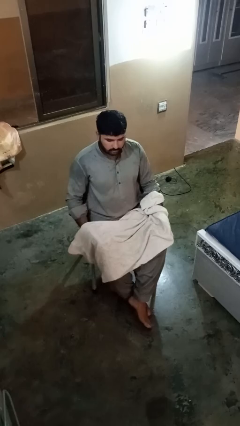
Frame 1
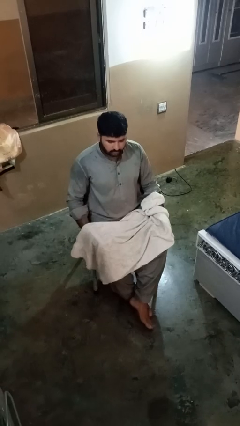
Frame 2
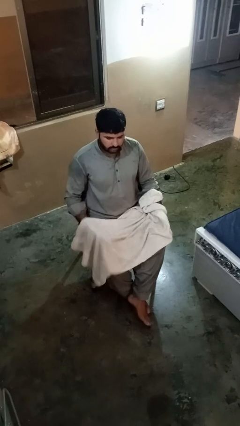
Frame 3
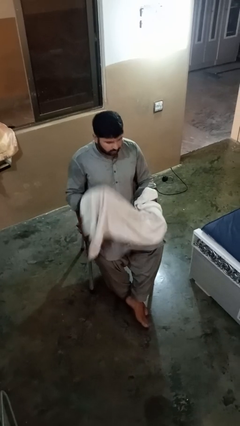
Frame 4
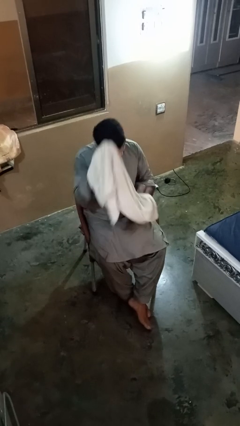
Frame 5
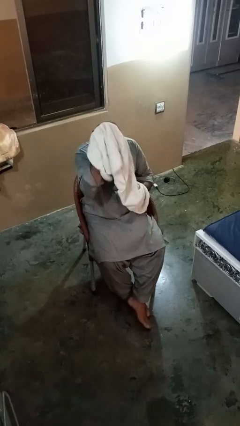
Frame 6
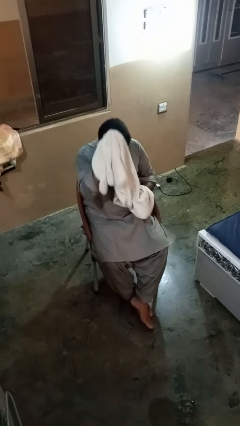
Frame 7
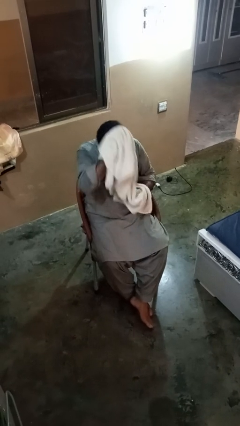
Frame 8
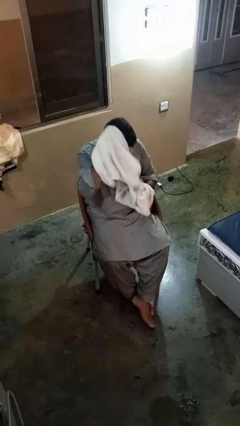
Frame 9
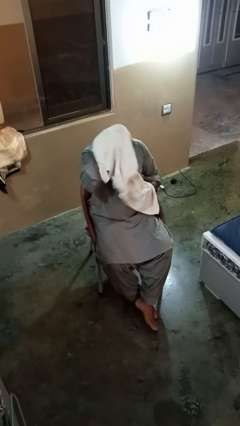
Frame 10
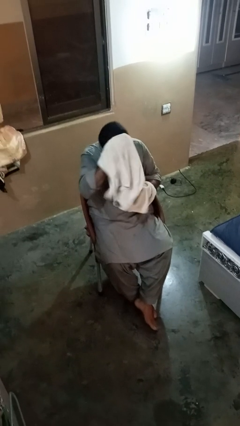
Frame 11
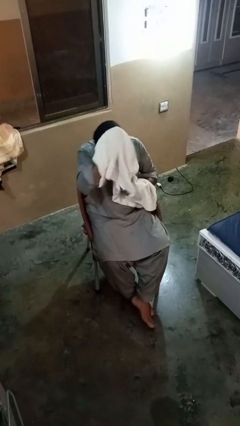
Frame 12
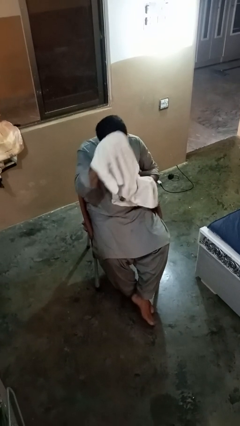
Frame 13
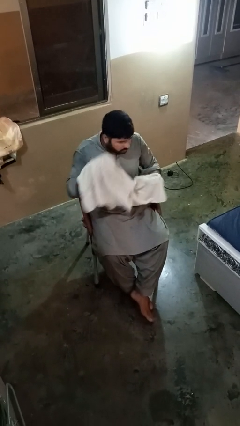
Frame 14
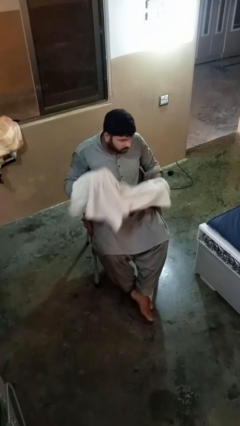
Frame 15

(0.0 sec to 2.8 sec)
person dries hair with towel

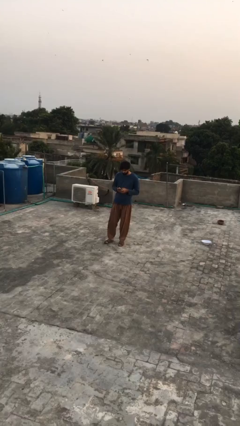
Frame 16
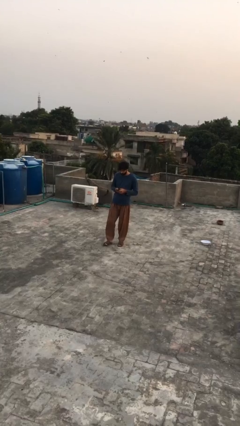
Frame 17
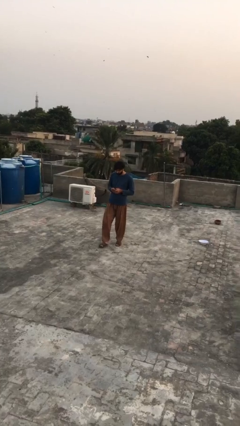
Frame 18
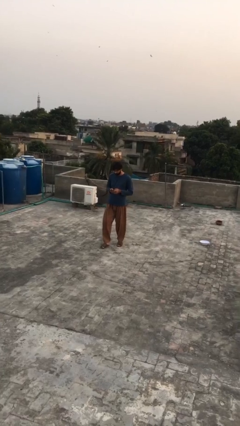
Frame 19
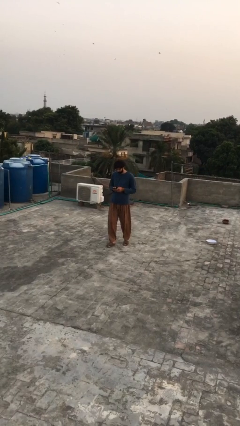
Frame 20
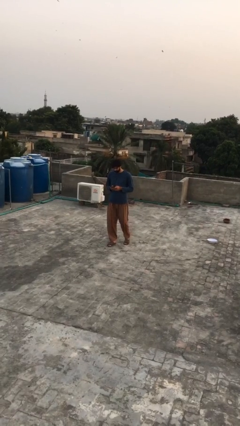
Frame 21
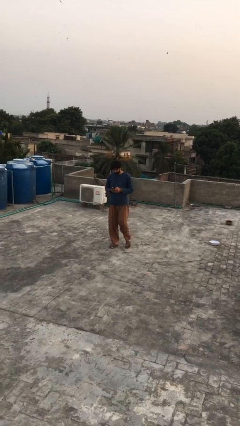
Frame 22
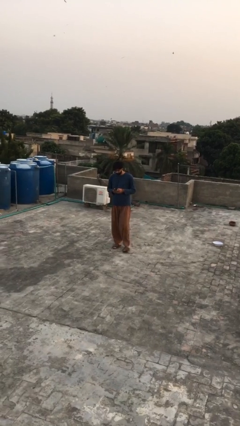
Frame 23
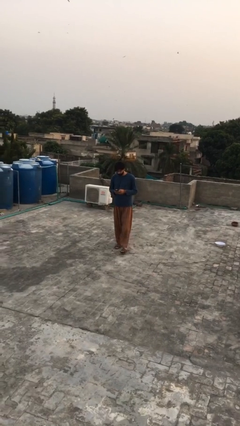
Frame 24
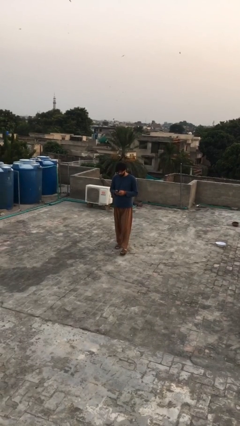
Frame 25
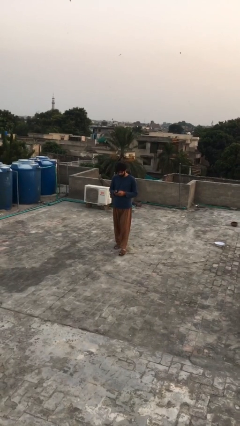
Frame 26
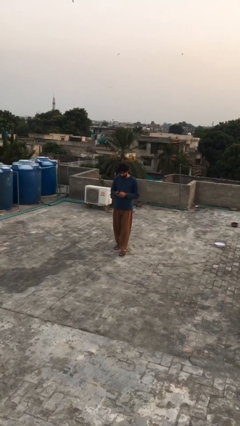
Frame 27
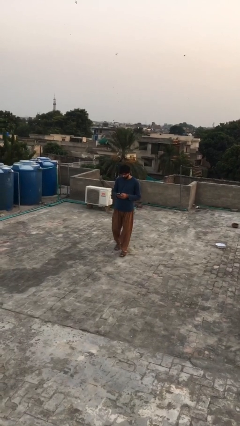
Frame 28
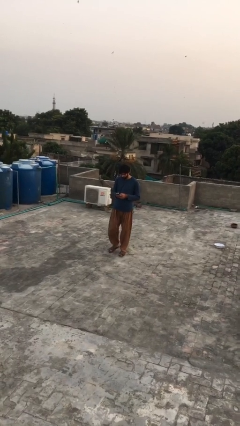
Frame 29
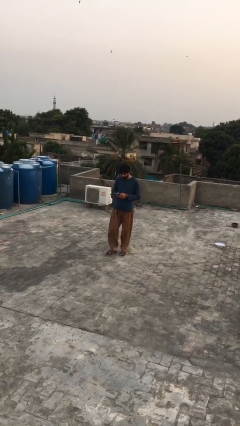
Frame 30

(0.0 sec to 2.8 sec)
person texts on phone

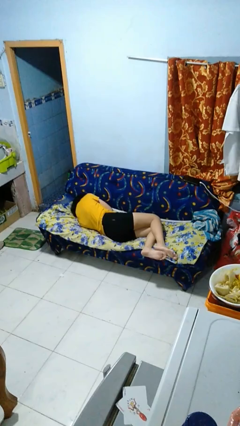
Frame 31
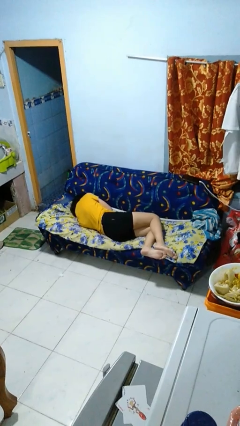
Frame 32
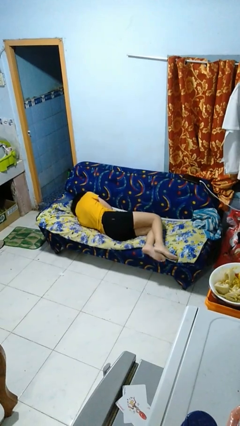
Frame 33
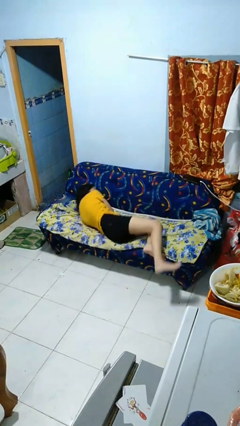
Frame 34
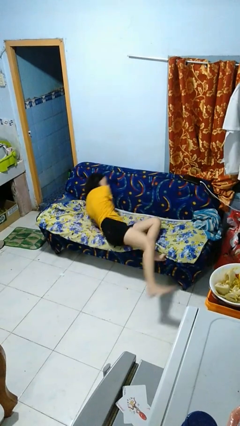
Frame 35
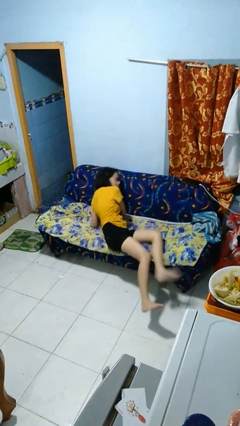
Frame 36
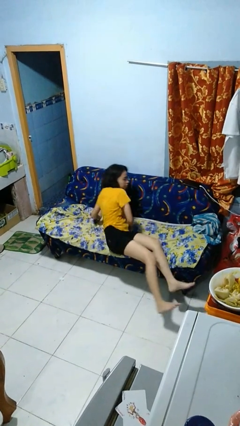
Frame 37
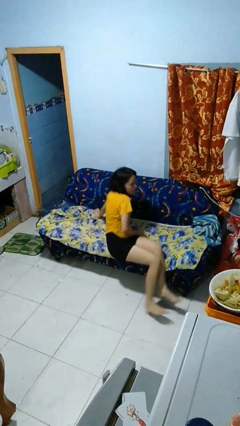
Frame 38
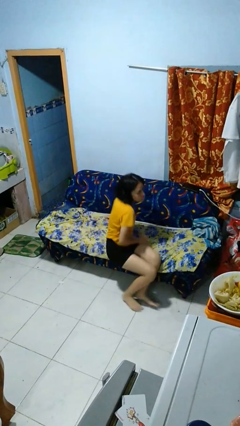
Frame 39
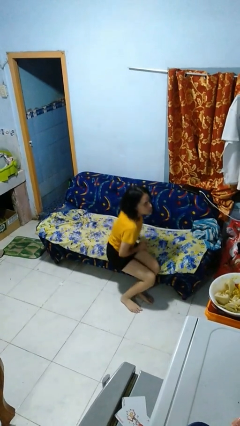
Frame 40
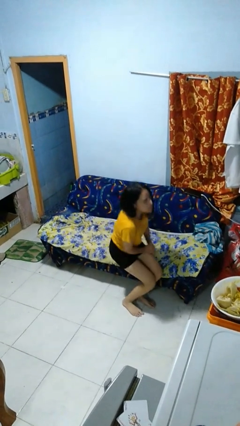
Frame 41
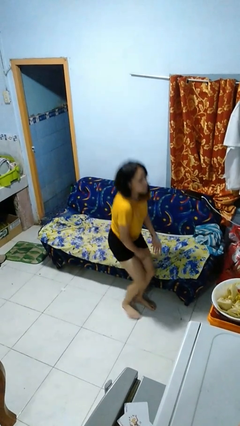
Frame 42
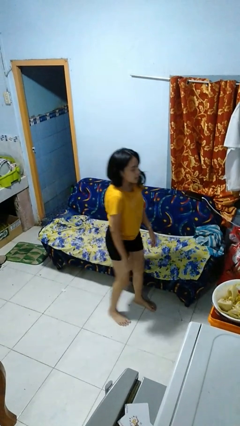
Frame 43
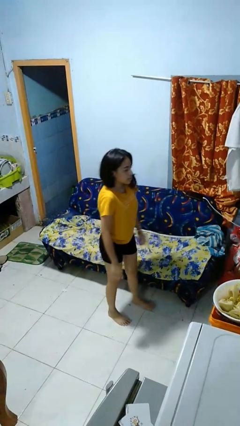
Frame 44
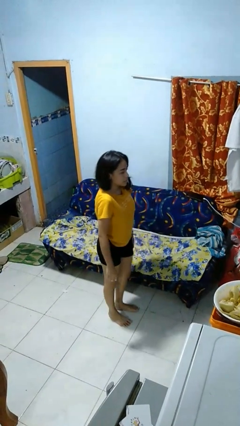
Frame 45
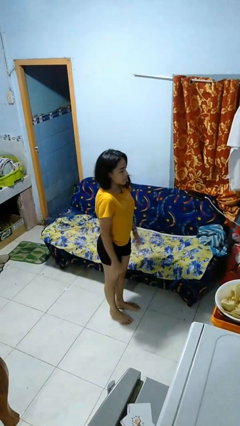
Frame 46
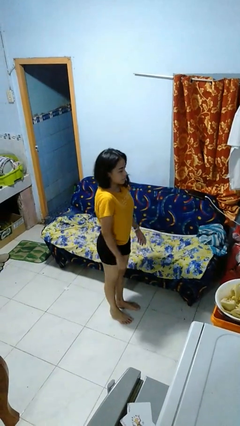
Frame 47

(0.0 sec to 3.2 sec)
person stands up

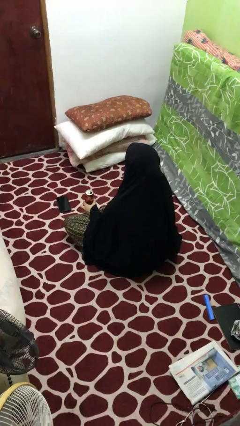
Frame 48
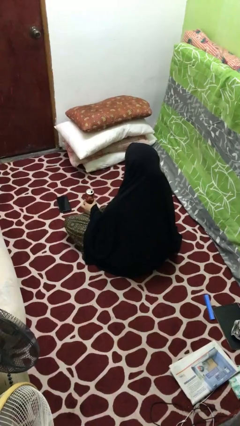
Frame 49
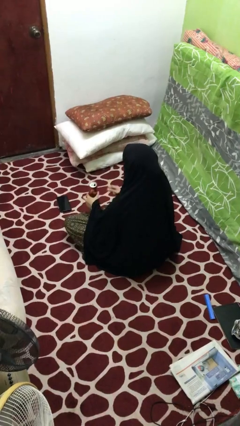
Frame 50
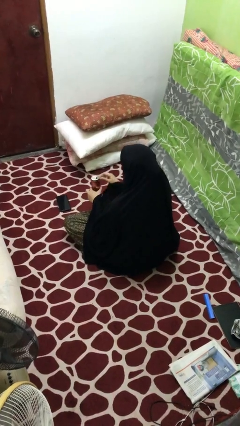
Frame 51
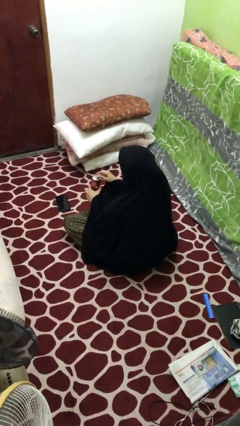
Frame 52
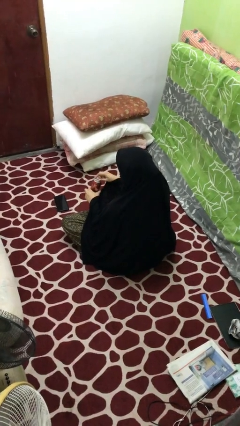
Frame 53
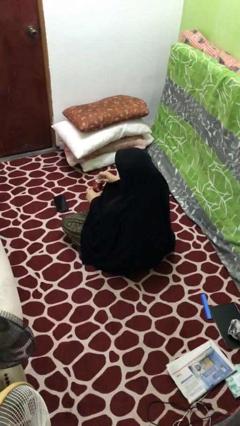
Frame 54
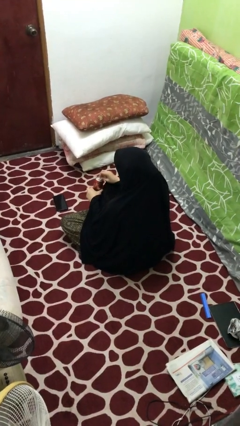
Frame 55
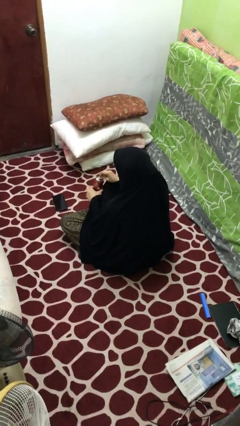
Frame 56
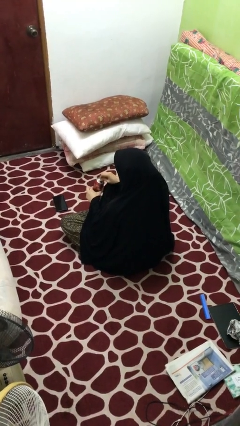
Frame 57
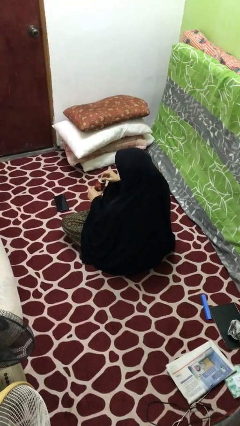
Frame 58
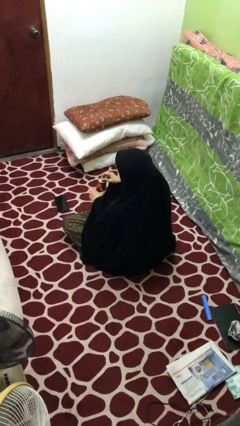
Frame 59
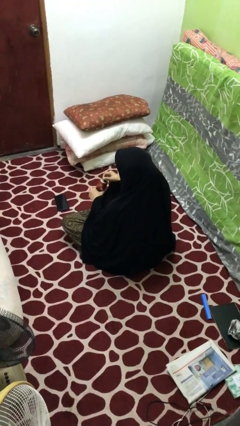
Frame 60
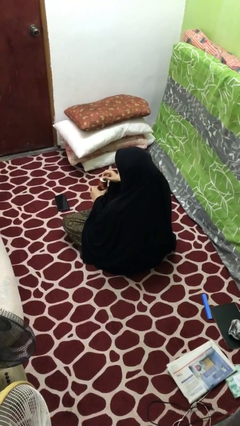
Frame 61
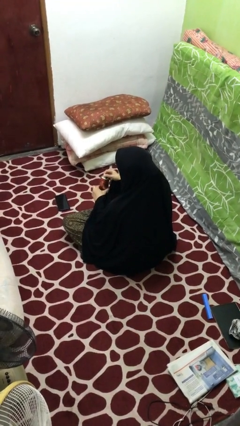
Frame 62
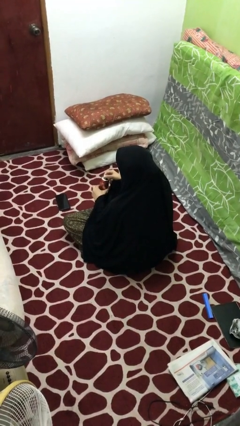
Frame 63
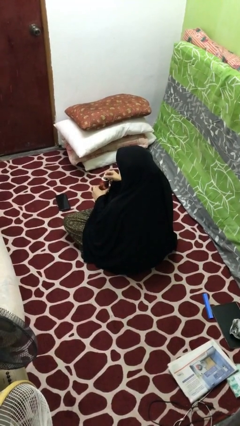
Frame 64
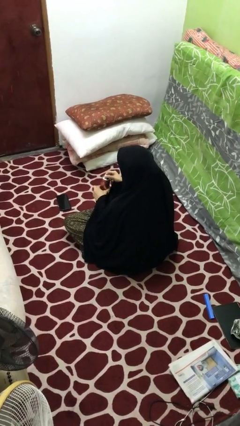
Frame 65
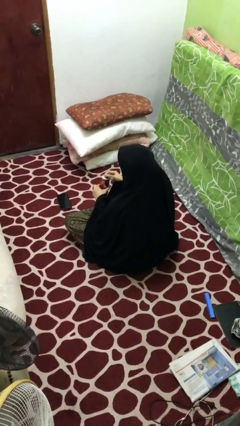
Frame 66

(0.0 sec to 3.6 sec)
person opens beverage can

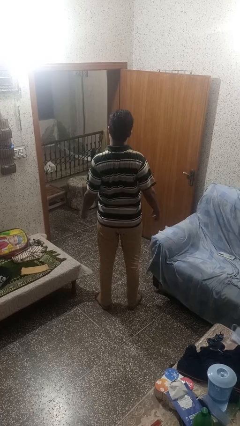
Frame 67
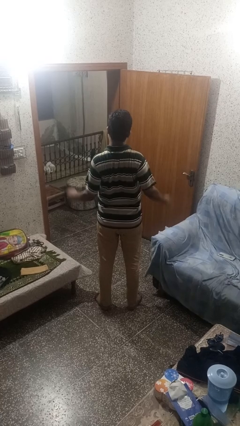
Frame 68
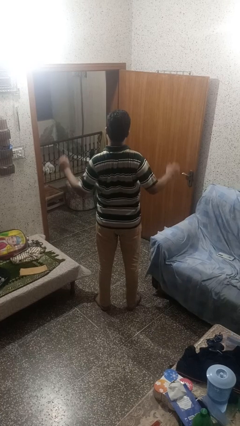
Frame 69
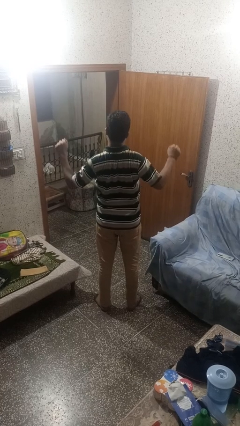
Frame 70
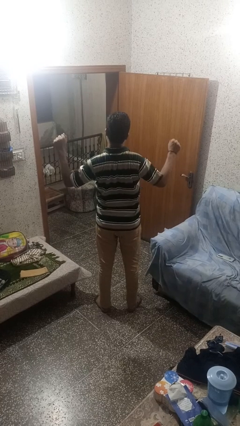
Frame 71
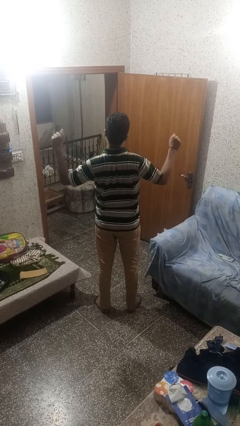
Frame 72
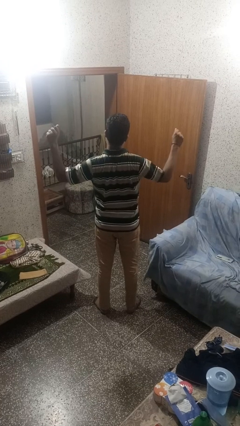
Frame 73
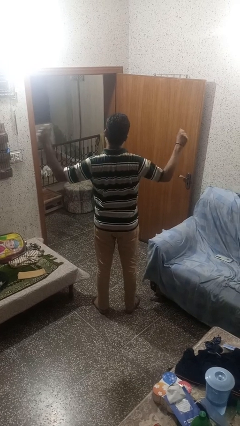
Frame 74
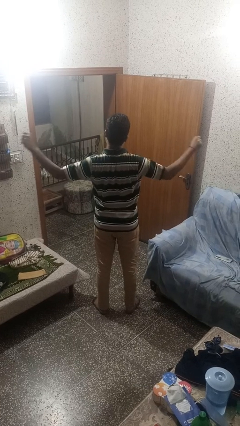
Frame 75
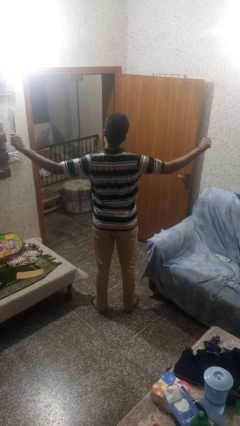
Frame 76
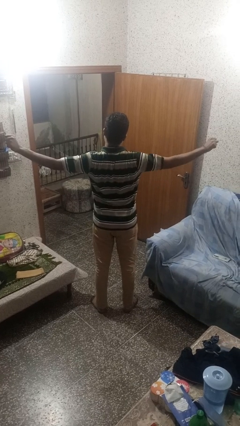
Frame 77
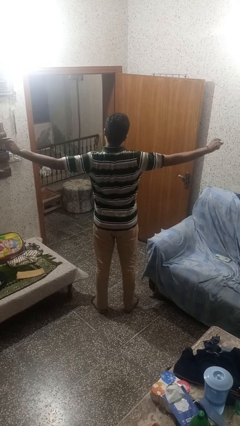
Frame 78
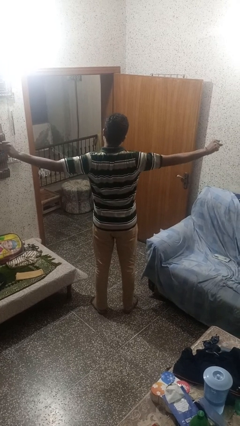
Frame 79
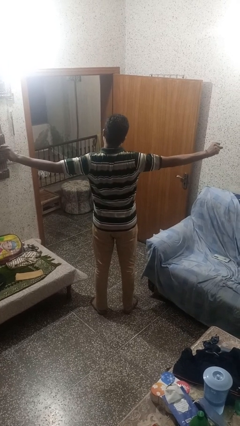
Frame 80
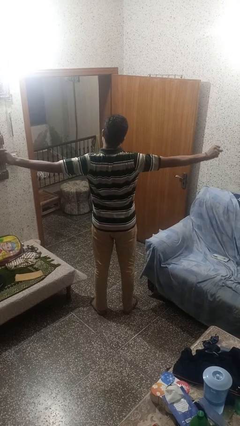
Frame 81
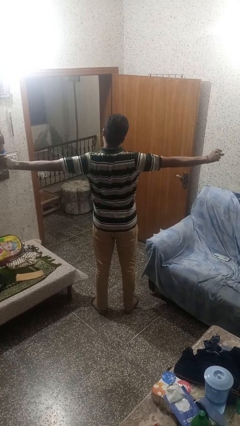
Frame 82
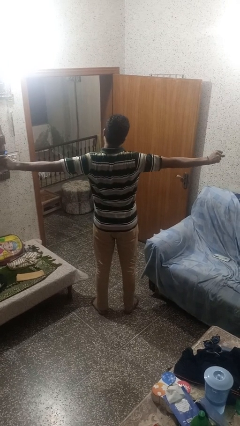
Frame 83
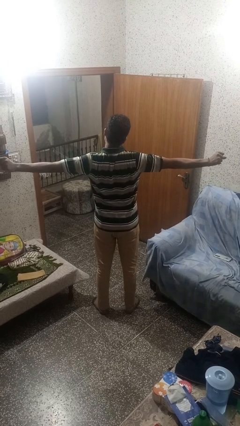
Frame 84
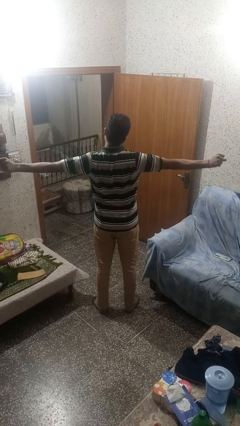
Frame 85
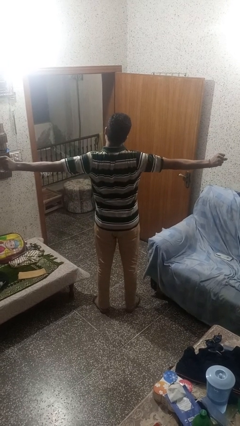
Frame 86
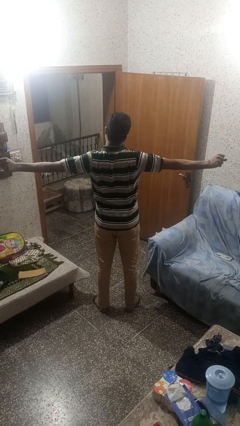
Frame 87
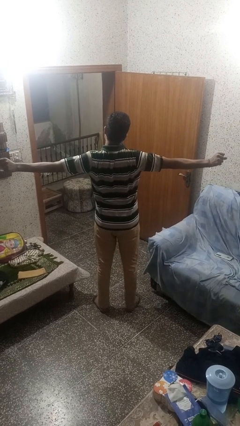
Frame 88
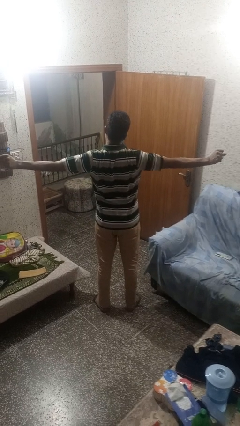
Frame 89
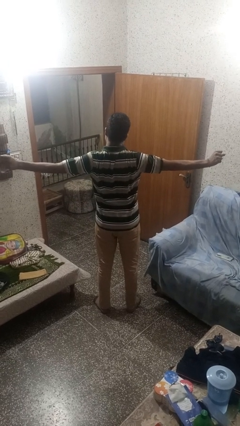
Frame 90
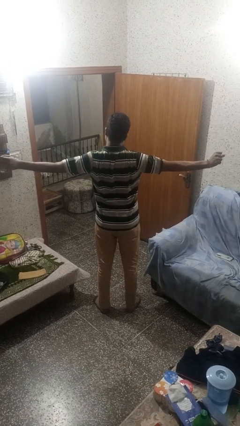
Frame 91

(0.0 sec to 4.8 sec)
person stretches arms to side

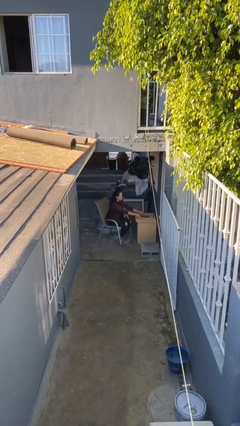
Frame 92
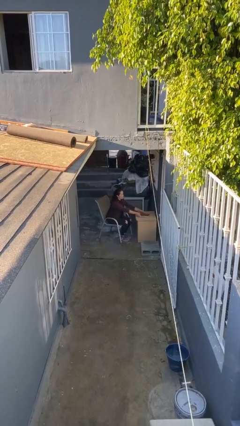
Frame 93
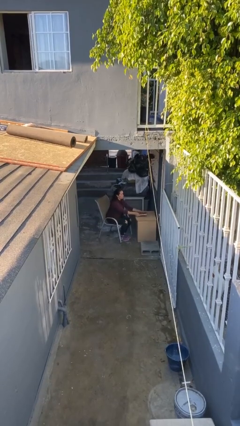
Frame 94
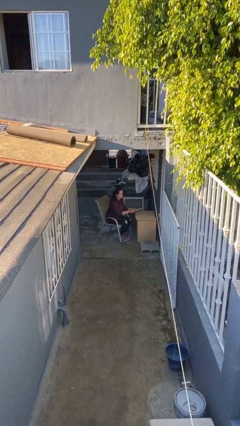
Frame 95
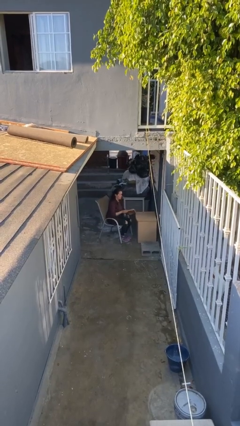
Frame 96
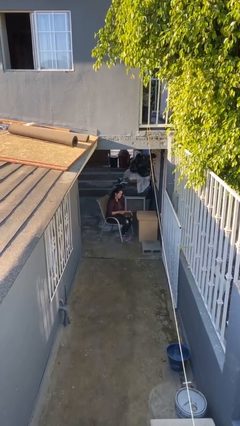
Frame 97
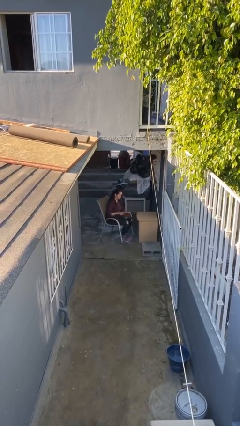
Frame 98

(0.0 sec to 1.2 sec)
person picks up object from table
